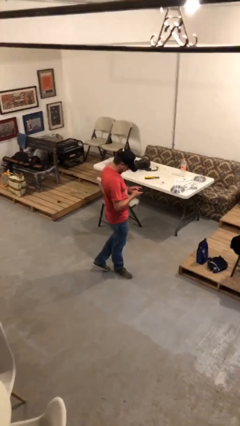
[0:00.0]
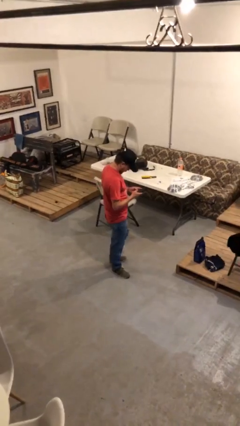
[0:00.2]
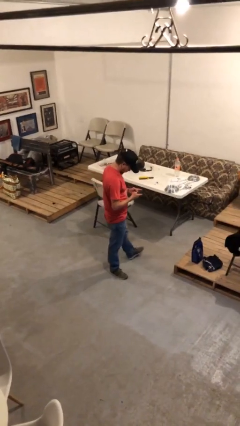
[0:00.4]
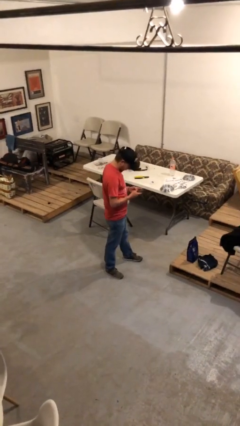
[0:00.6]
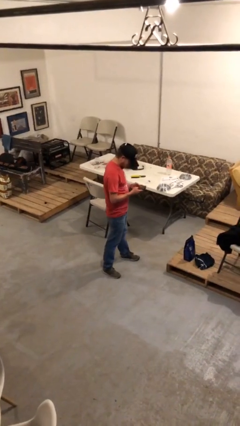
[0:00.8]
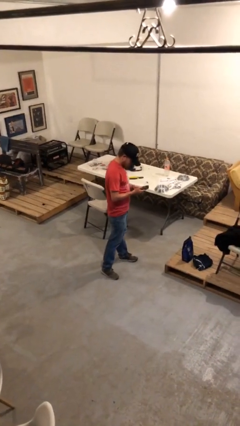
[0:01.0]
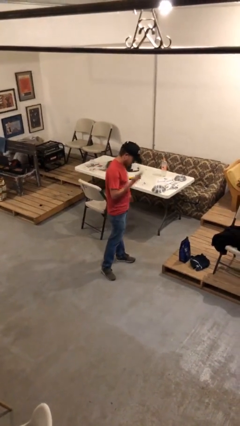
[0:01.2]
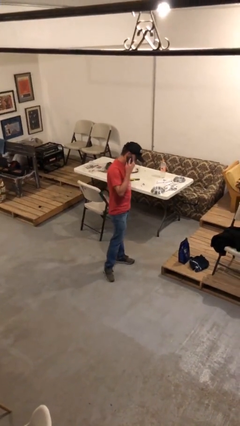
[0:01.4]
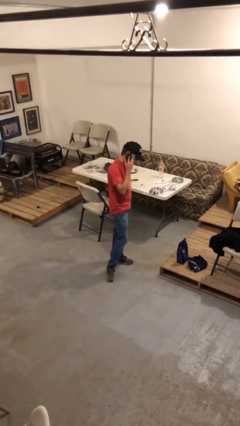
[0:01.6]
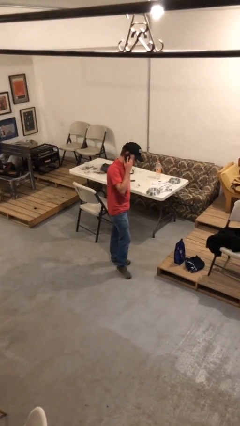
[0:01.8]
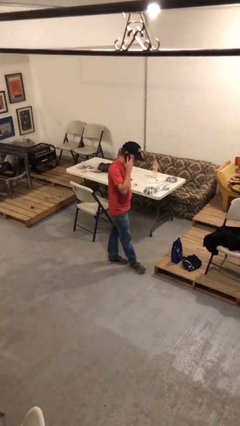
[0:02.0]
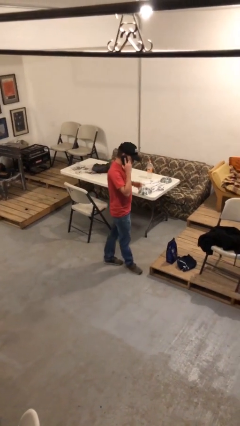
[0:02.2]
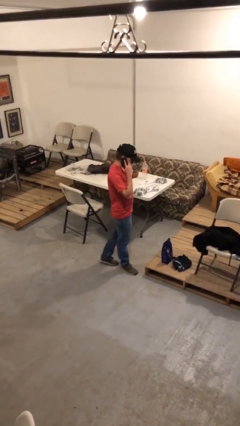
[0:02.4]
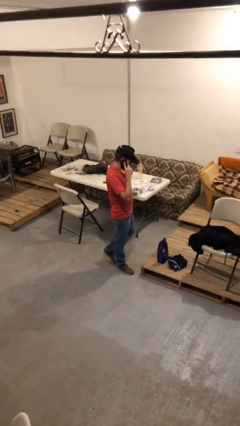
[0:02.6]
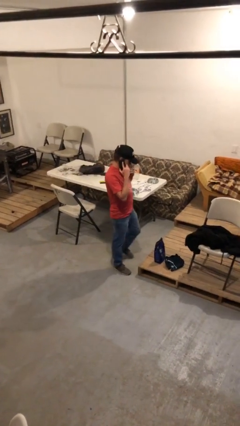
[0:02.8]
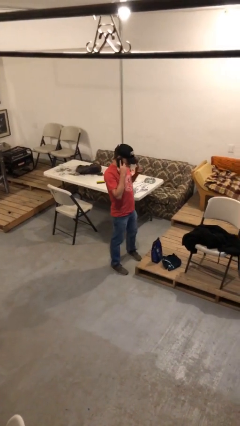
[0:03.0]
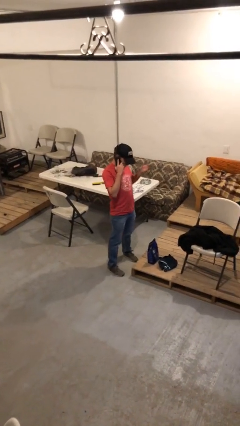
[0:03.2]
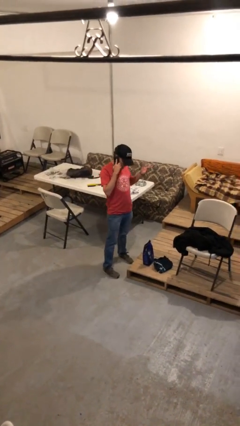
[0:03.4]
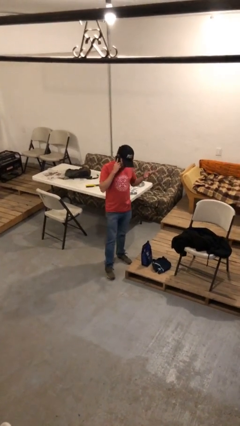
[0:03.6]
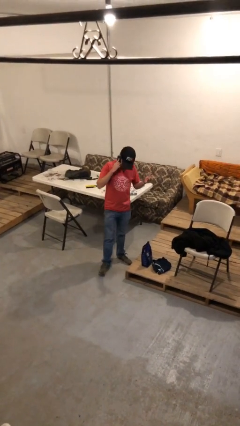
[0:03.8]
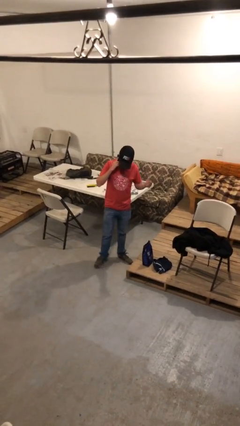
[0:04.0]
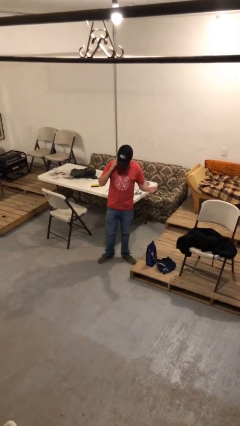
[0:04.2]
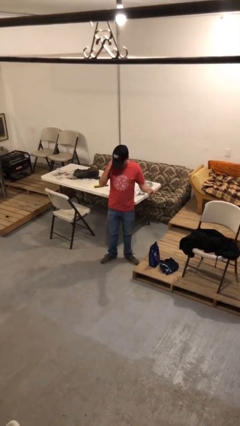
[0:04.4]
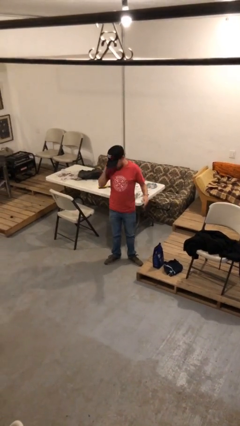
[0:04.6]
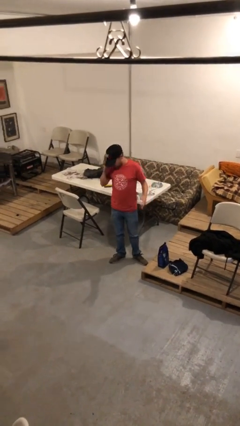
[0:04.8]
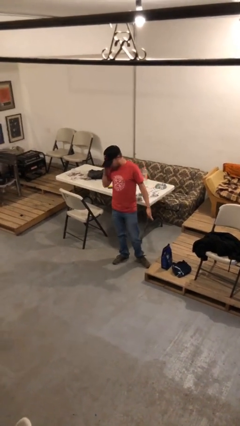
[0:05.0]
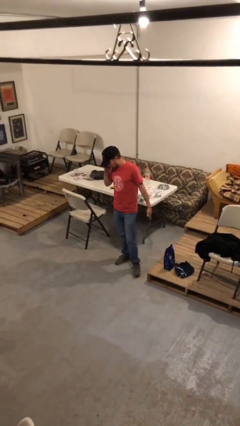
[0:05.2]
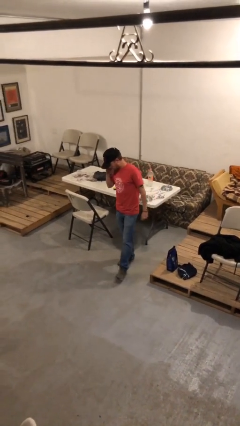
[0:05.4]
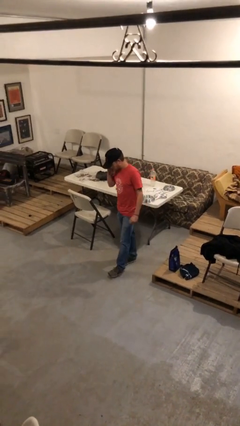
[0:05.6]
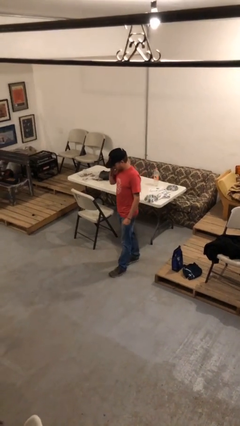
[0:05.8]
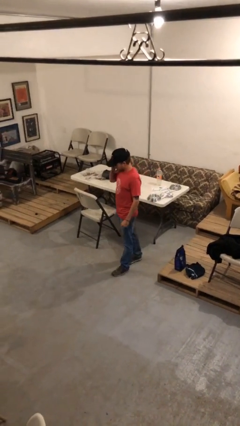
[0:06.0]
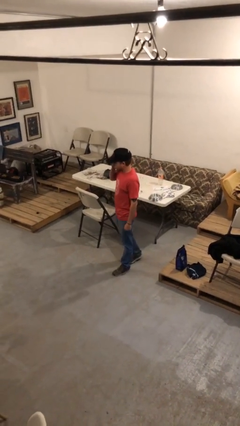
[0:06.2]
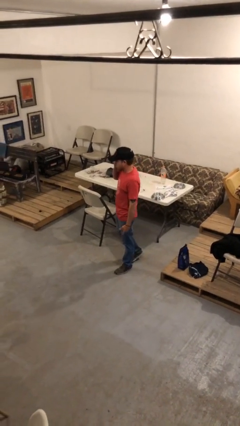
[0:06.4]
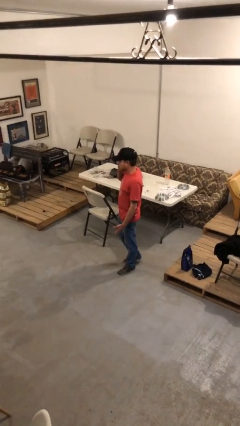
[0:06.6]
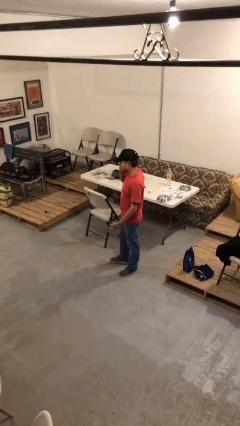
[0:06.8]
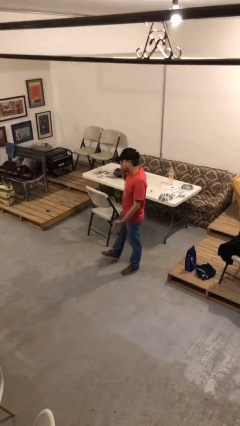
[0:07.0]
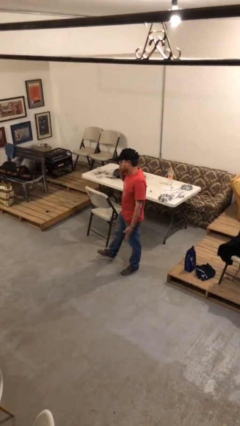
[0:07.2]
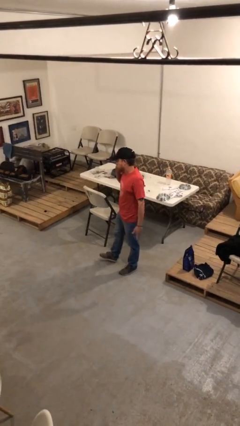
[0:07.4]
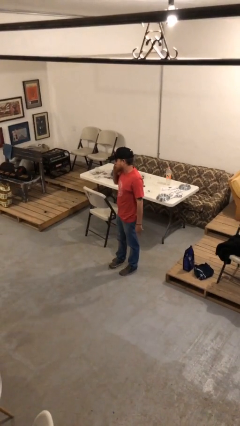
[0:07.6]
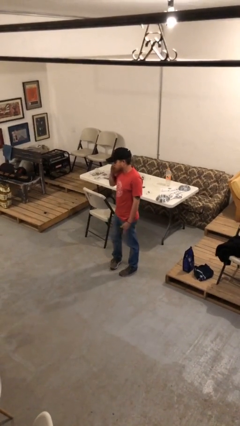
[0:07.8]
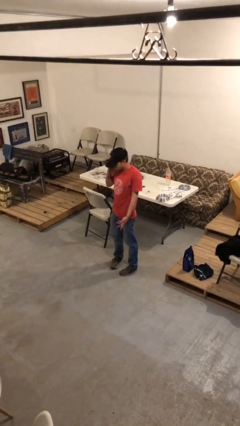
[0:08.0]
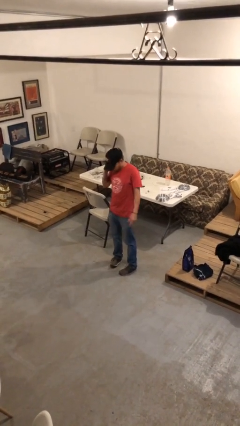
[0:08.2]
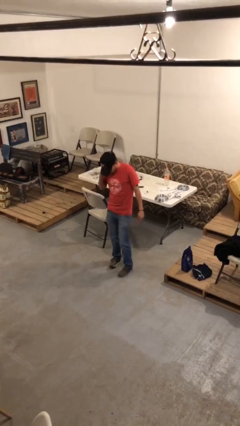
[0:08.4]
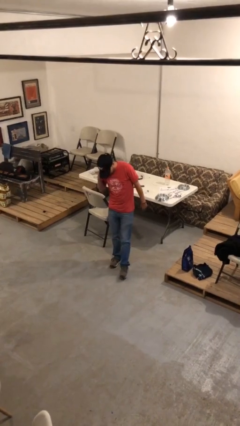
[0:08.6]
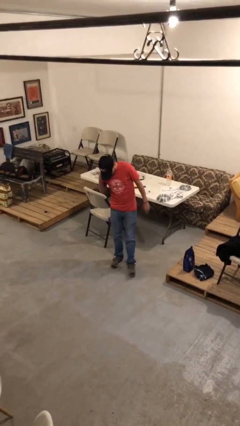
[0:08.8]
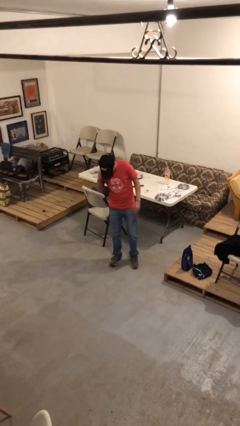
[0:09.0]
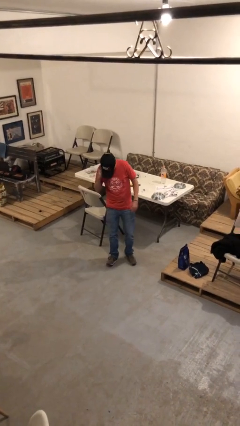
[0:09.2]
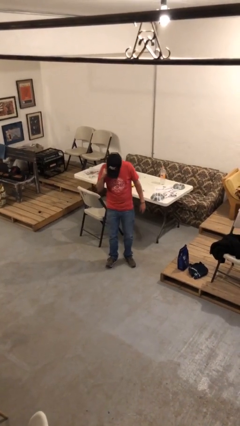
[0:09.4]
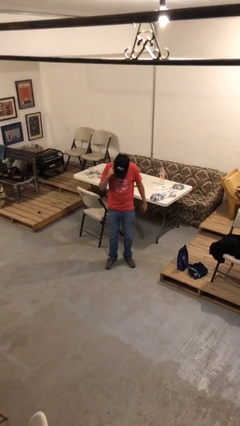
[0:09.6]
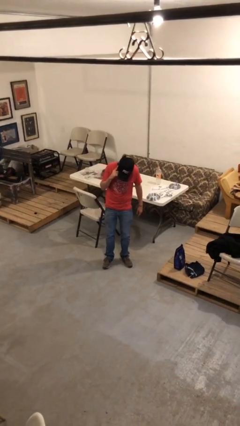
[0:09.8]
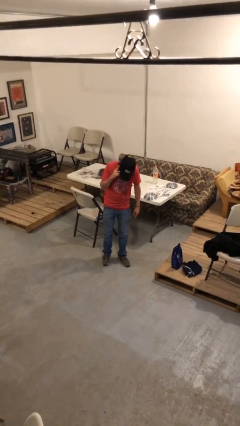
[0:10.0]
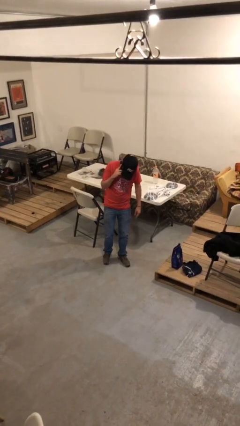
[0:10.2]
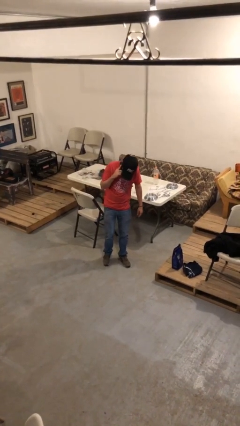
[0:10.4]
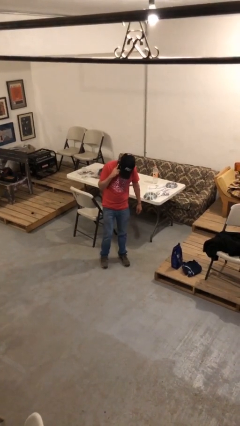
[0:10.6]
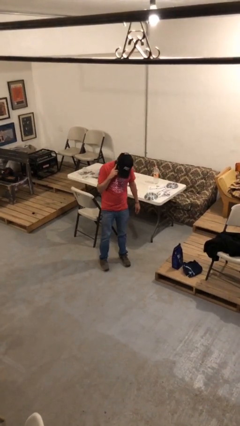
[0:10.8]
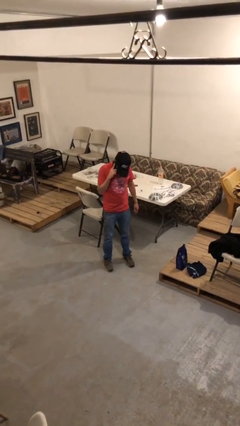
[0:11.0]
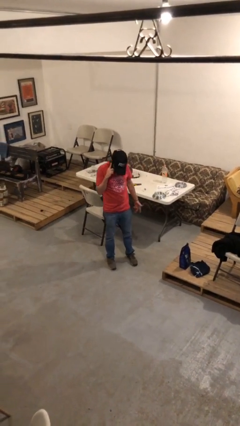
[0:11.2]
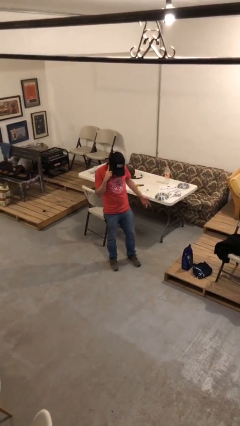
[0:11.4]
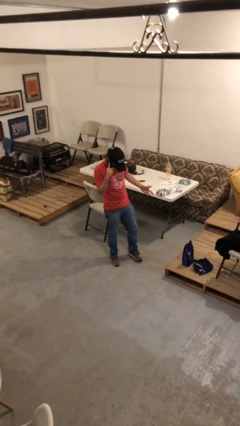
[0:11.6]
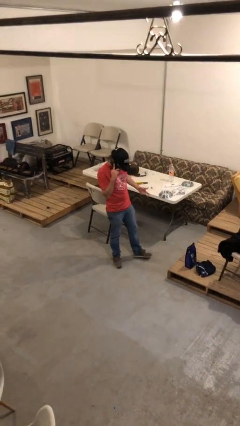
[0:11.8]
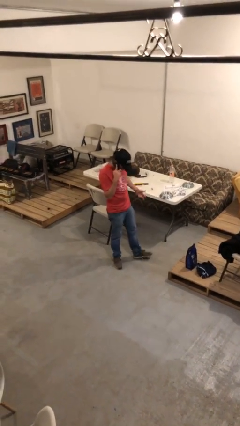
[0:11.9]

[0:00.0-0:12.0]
person talks on phone

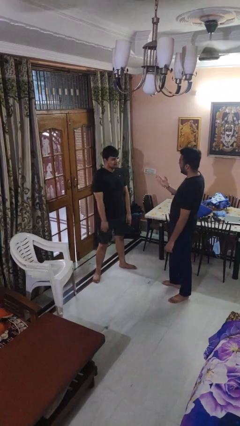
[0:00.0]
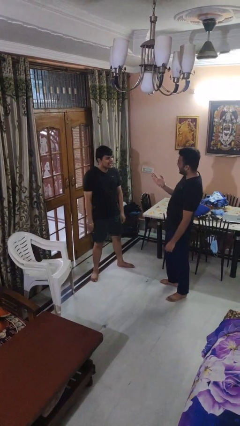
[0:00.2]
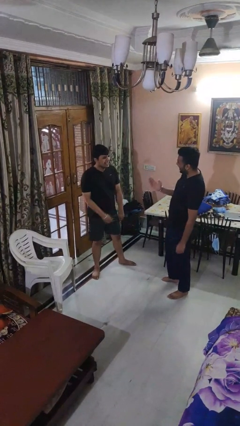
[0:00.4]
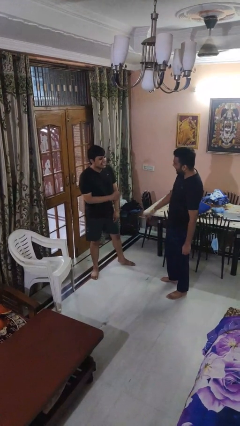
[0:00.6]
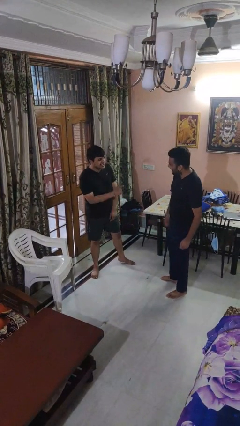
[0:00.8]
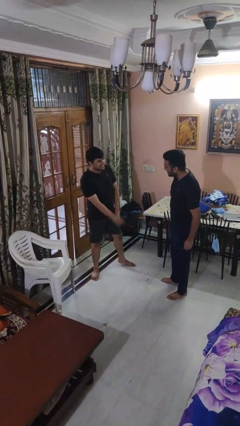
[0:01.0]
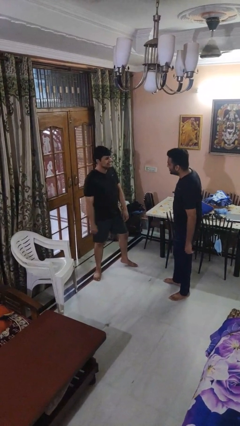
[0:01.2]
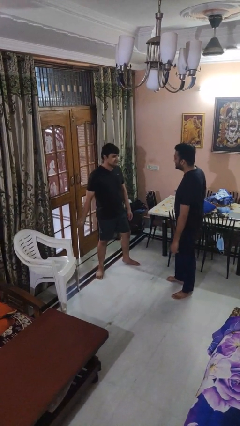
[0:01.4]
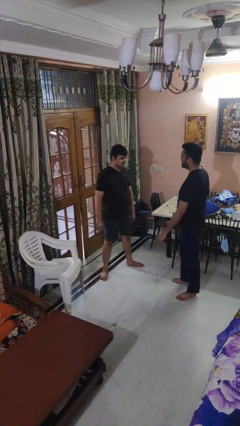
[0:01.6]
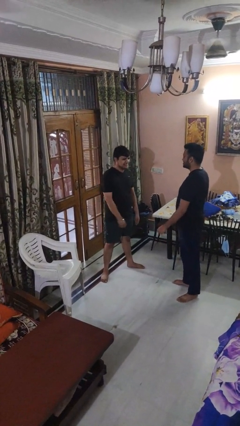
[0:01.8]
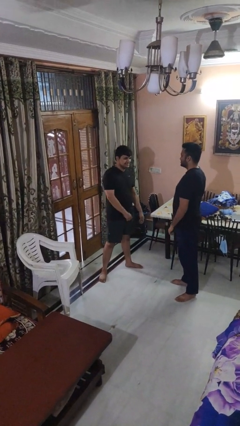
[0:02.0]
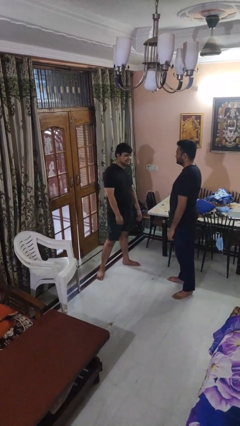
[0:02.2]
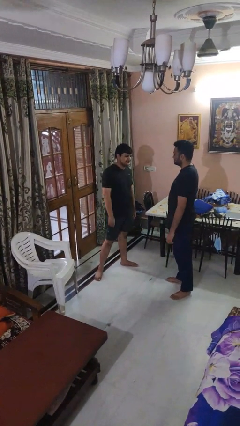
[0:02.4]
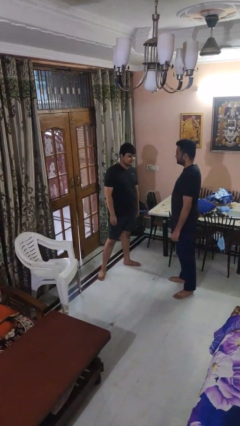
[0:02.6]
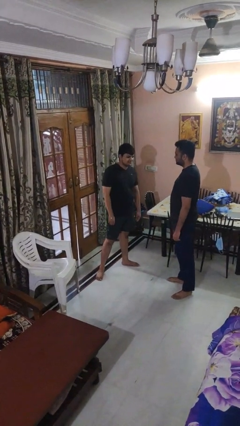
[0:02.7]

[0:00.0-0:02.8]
person laughs with person

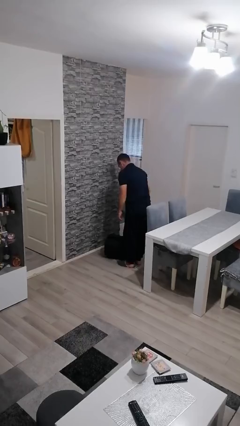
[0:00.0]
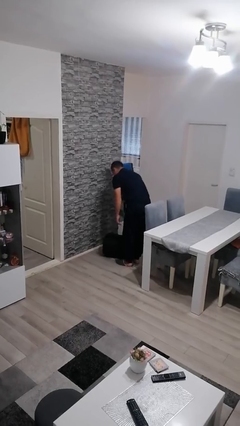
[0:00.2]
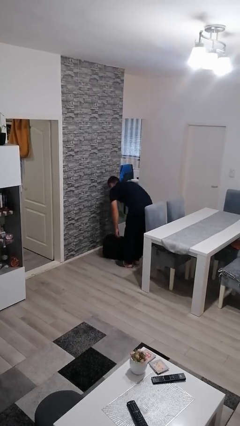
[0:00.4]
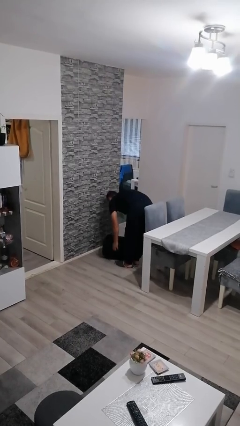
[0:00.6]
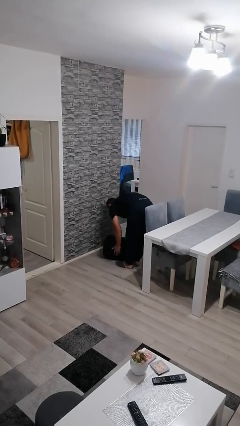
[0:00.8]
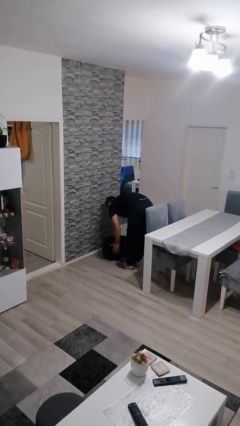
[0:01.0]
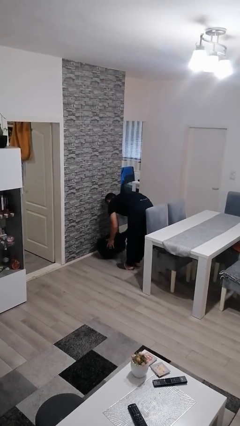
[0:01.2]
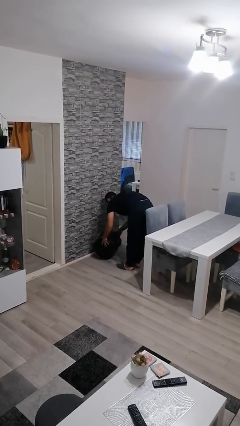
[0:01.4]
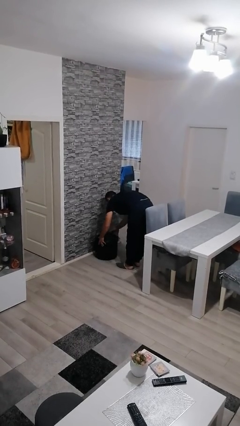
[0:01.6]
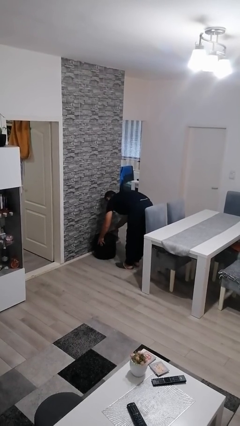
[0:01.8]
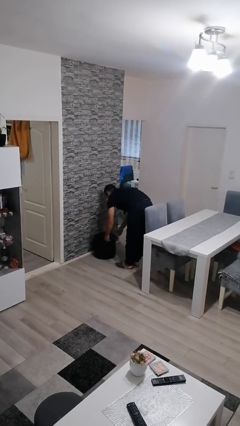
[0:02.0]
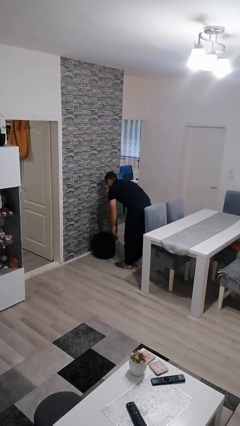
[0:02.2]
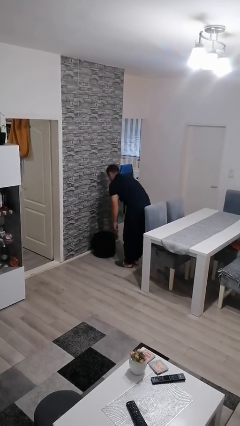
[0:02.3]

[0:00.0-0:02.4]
person sets upright furniture

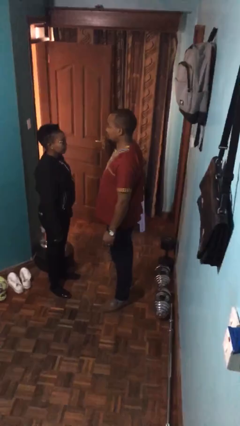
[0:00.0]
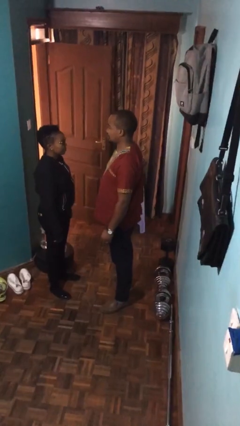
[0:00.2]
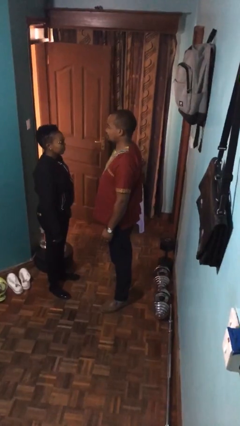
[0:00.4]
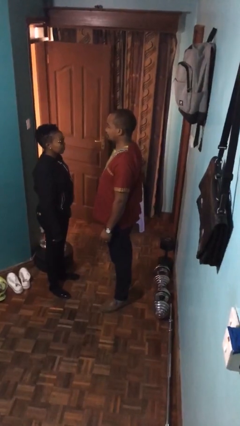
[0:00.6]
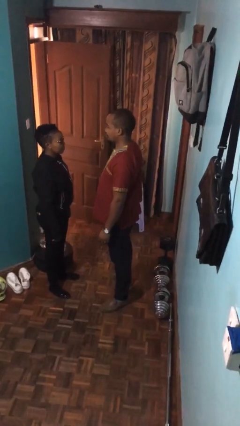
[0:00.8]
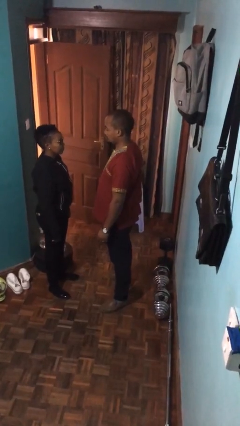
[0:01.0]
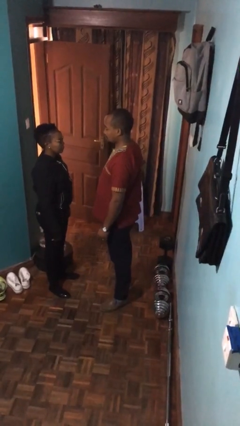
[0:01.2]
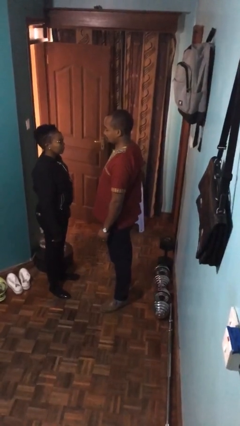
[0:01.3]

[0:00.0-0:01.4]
person grabs person by forearm
